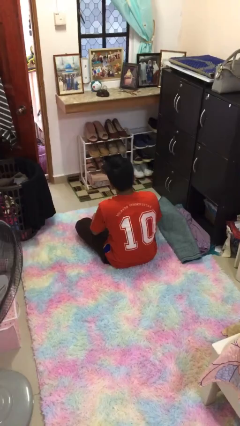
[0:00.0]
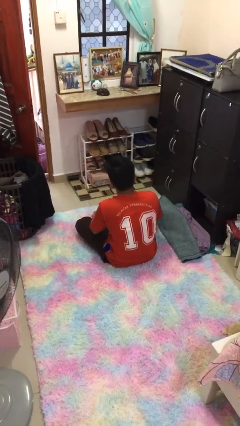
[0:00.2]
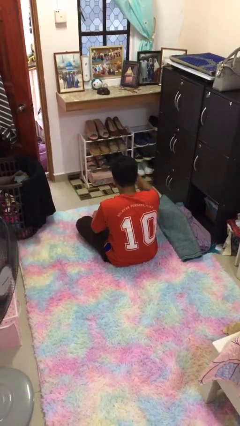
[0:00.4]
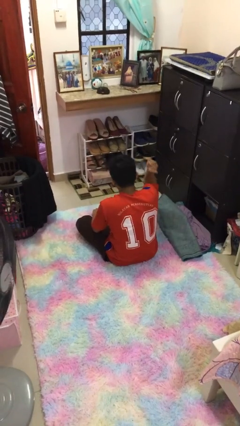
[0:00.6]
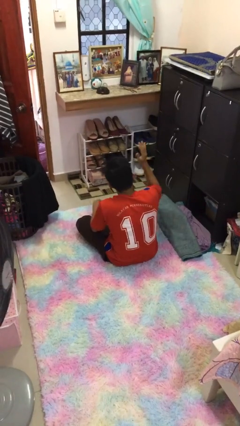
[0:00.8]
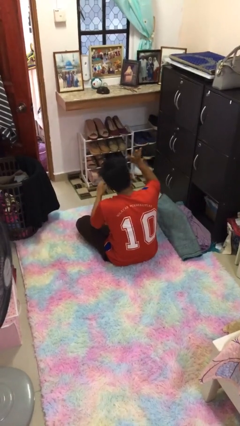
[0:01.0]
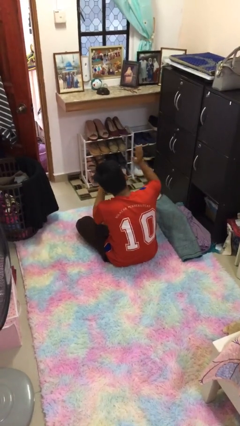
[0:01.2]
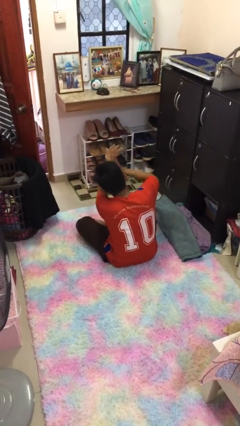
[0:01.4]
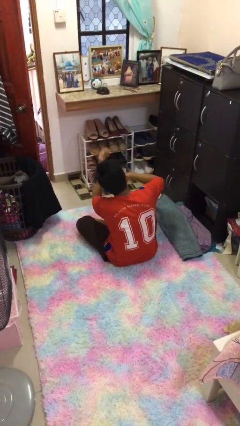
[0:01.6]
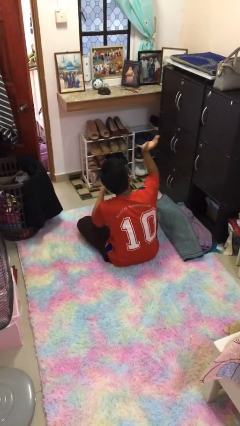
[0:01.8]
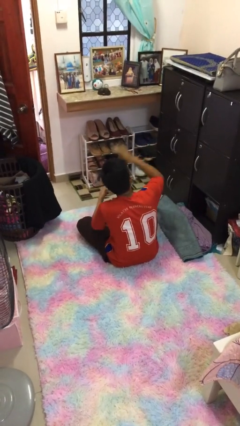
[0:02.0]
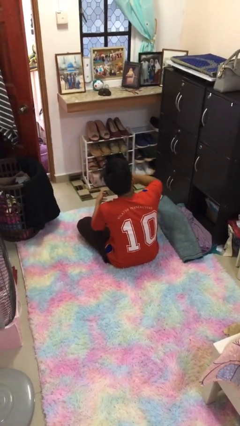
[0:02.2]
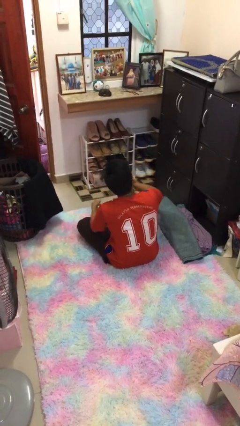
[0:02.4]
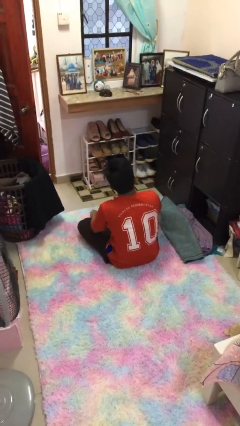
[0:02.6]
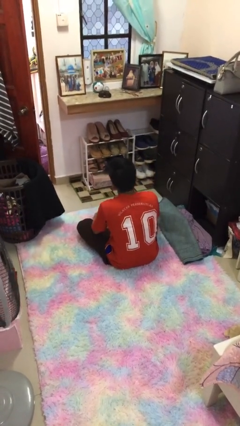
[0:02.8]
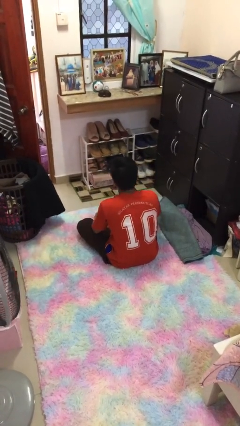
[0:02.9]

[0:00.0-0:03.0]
person swats bug

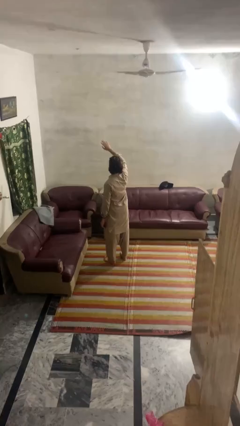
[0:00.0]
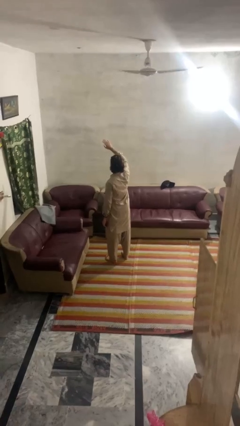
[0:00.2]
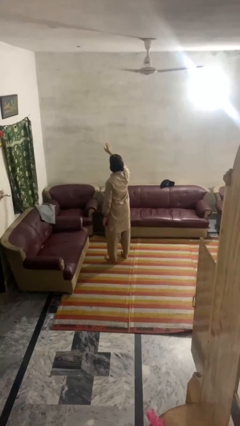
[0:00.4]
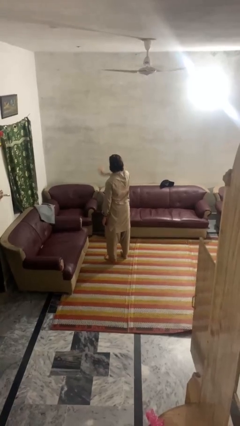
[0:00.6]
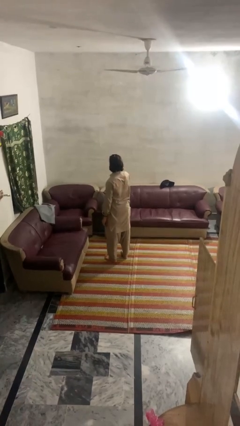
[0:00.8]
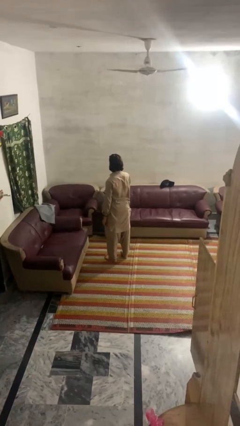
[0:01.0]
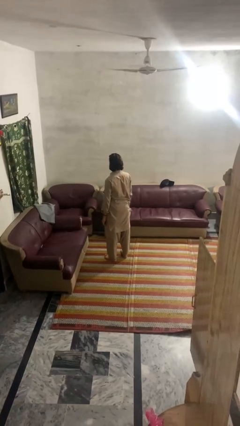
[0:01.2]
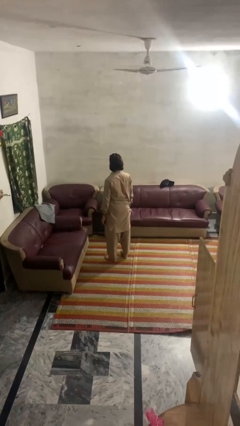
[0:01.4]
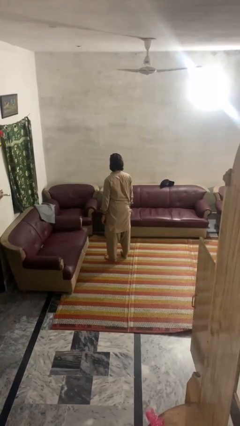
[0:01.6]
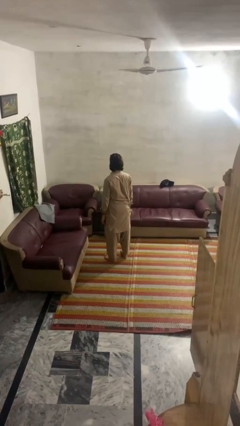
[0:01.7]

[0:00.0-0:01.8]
person gestures swipe down

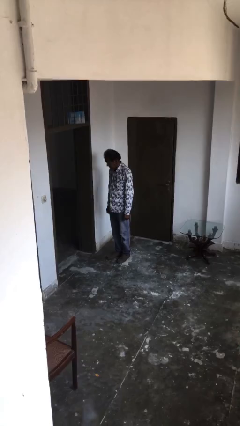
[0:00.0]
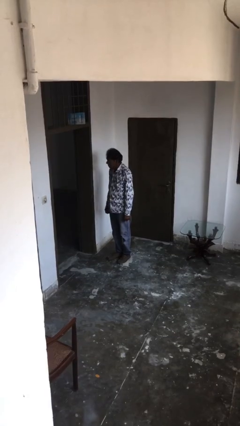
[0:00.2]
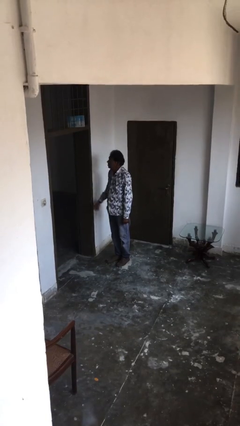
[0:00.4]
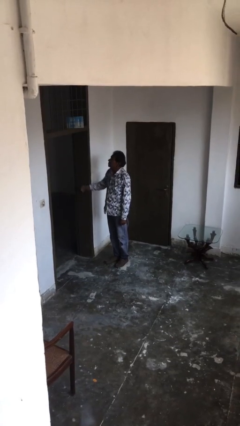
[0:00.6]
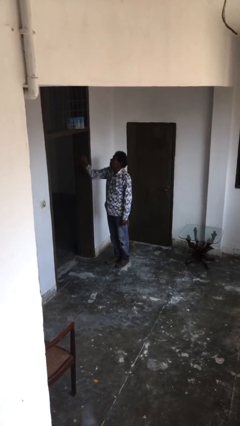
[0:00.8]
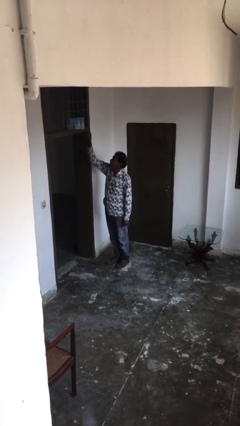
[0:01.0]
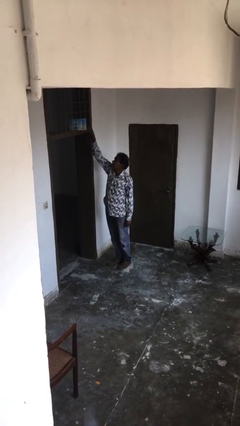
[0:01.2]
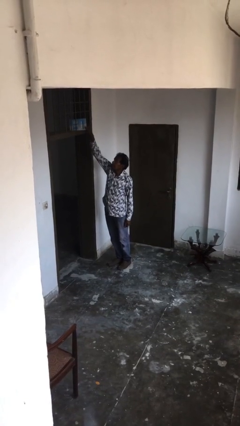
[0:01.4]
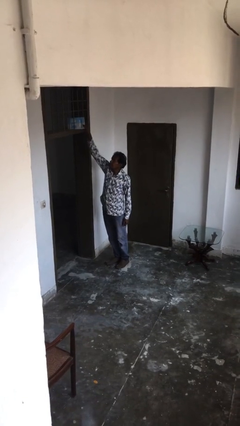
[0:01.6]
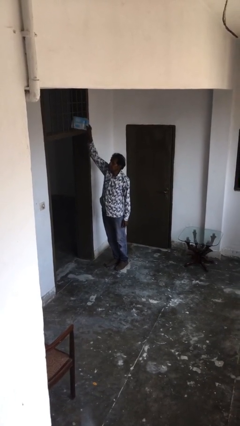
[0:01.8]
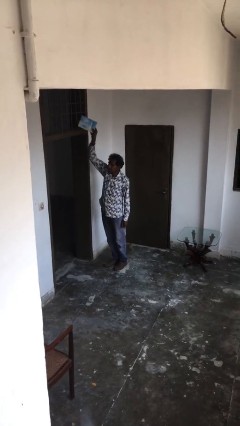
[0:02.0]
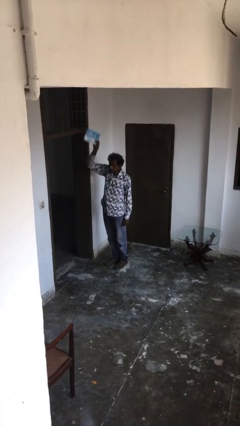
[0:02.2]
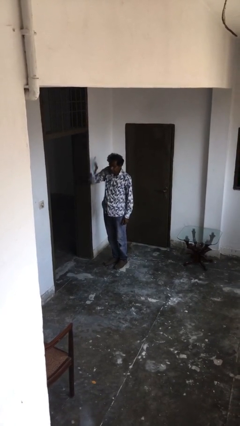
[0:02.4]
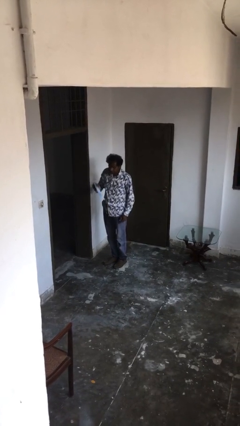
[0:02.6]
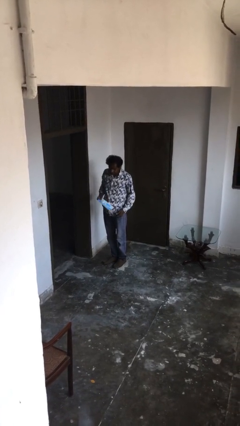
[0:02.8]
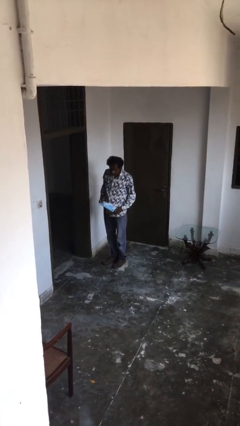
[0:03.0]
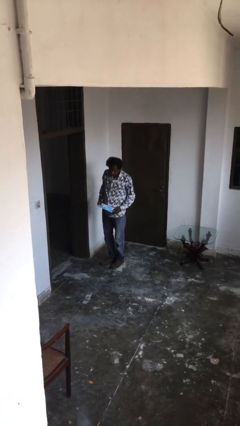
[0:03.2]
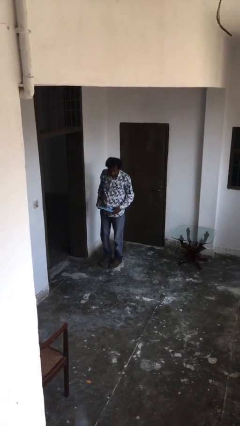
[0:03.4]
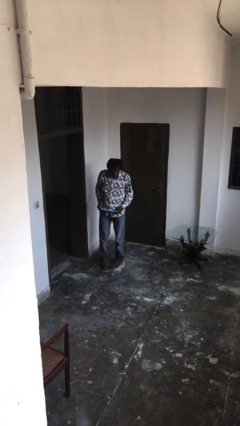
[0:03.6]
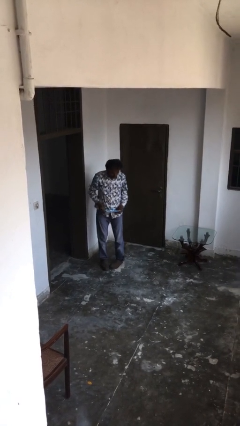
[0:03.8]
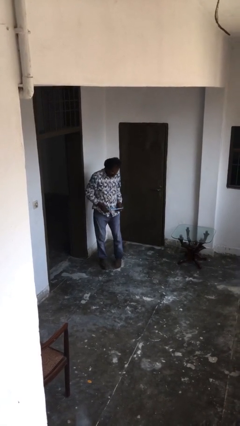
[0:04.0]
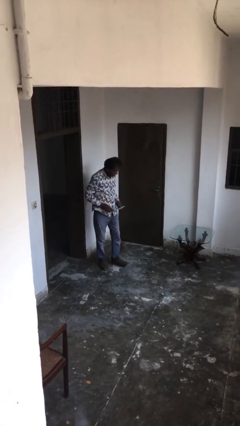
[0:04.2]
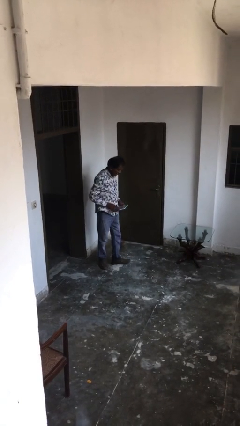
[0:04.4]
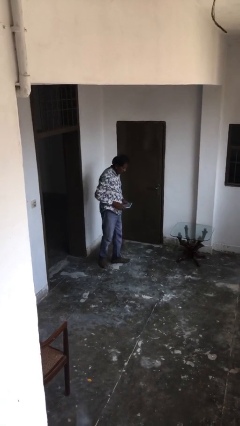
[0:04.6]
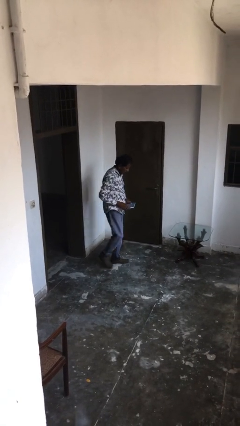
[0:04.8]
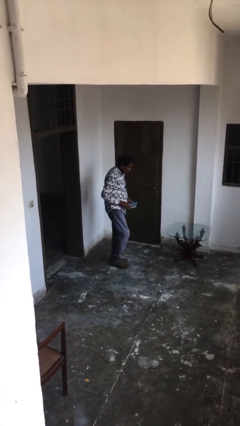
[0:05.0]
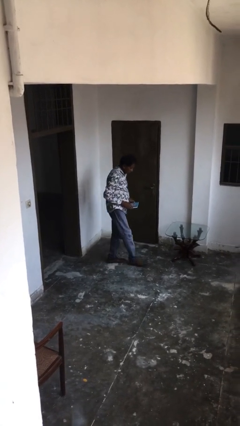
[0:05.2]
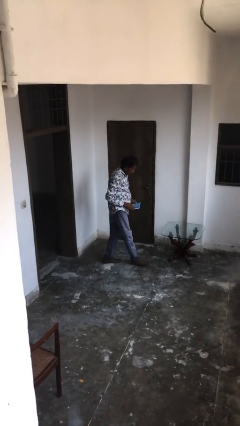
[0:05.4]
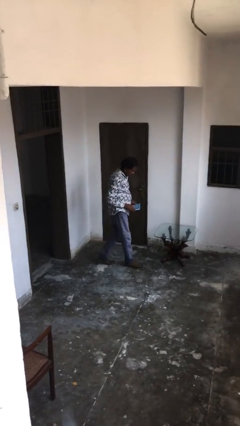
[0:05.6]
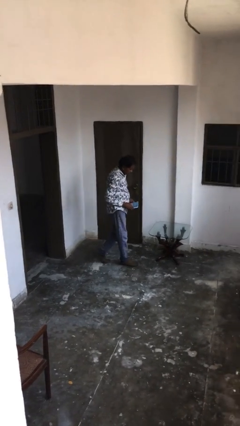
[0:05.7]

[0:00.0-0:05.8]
person picks up object from shelf

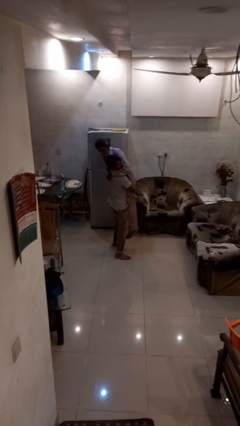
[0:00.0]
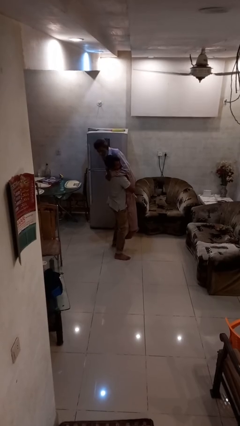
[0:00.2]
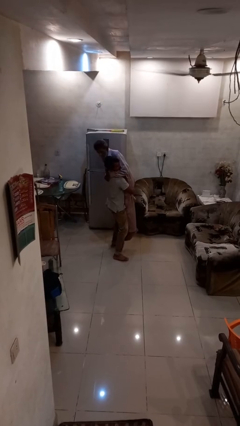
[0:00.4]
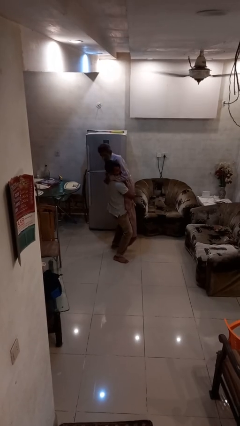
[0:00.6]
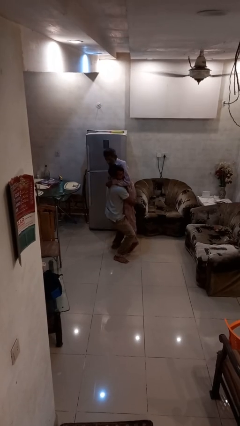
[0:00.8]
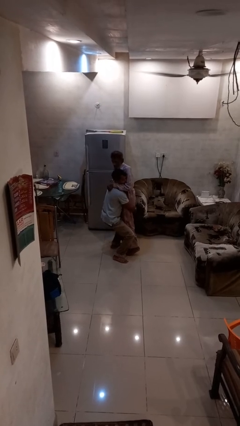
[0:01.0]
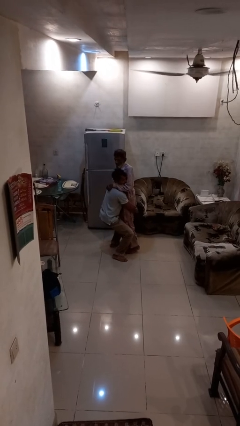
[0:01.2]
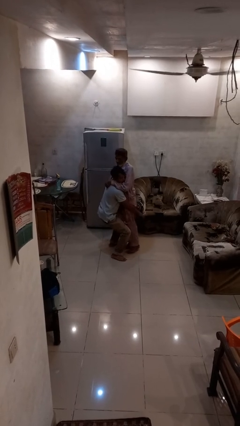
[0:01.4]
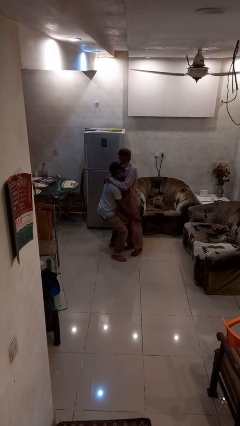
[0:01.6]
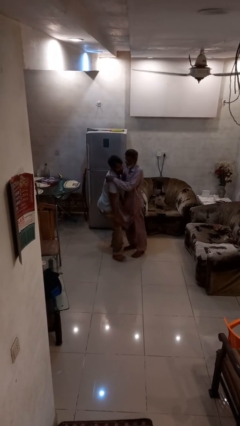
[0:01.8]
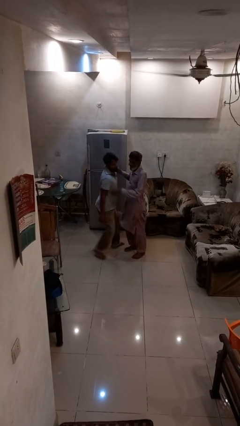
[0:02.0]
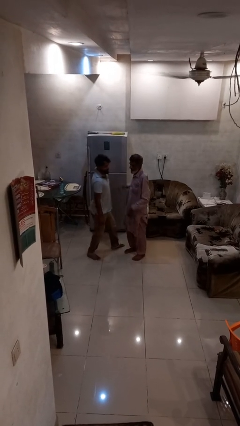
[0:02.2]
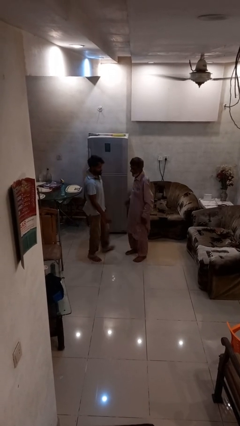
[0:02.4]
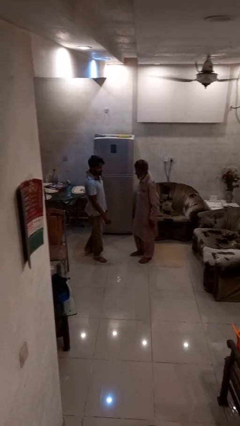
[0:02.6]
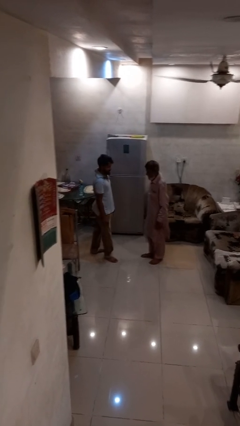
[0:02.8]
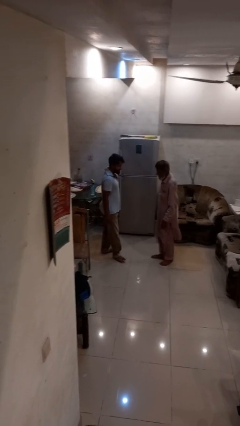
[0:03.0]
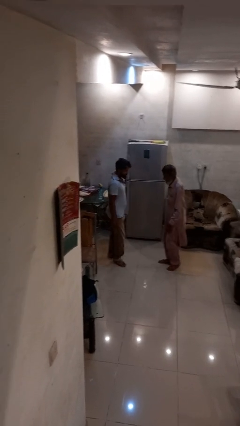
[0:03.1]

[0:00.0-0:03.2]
person puts down person

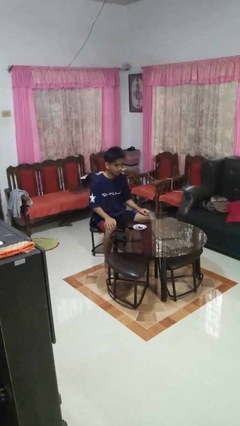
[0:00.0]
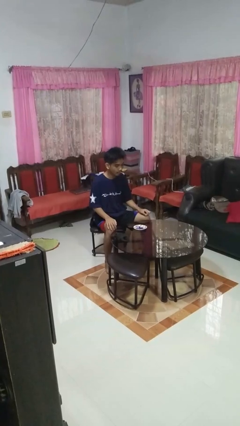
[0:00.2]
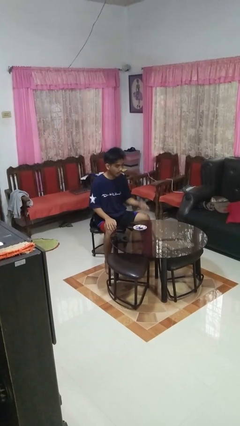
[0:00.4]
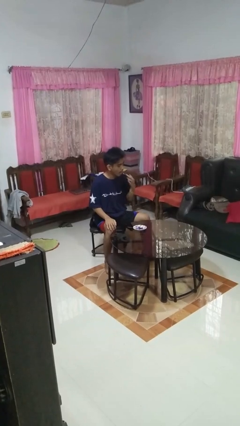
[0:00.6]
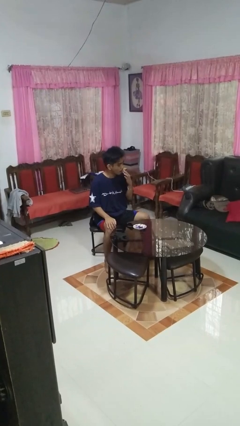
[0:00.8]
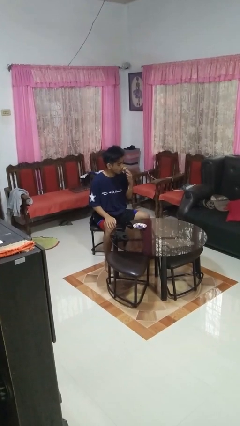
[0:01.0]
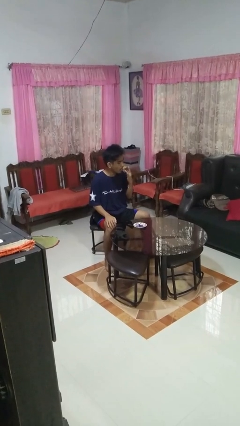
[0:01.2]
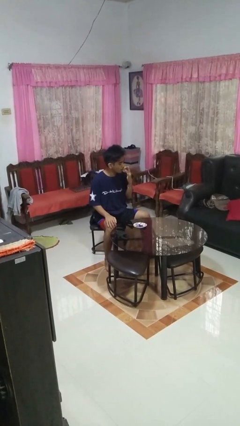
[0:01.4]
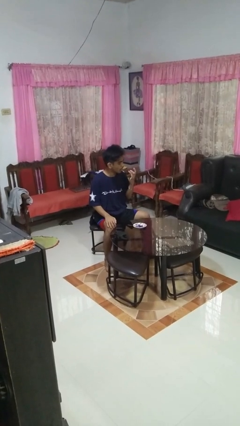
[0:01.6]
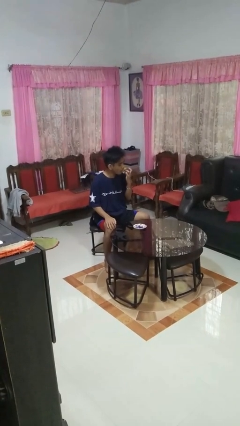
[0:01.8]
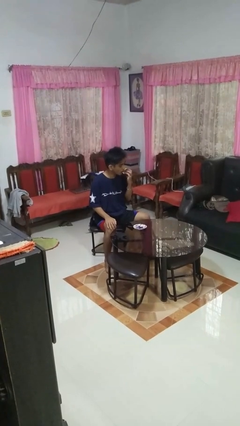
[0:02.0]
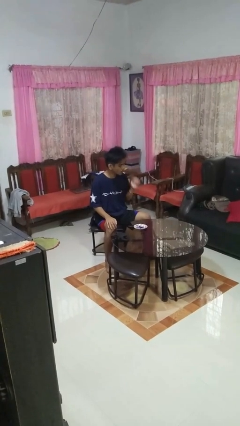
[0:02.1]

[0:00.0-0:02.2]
person licks fingers

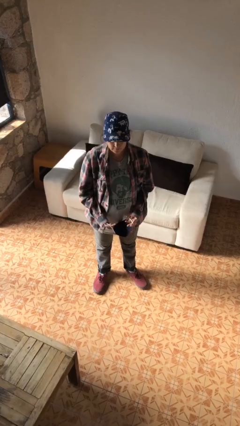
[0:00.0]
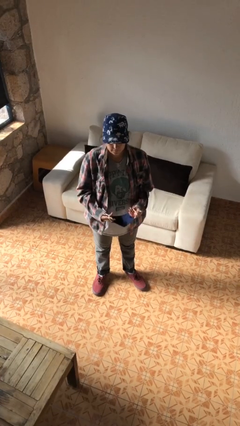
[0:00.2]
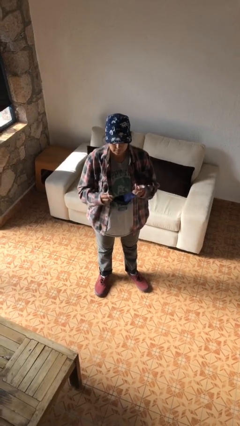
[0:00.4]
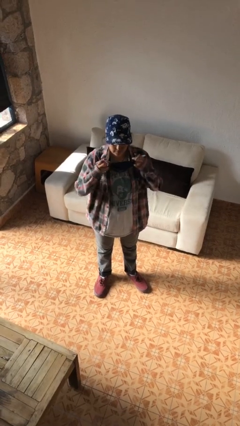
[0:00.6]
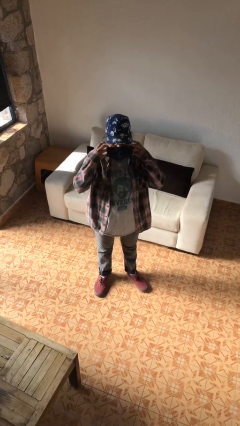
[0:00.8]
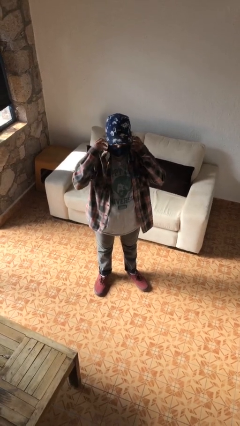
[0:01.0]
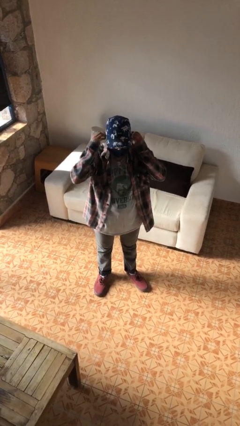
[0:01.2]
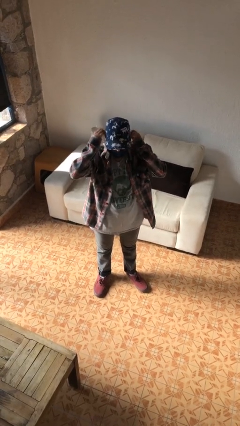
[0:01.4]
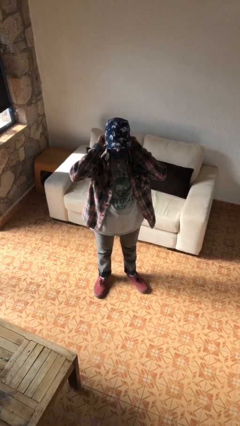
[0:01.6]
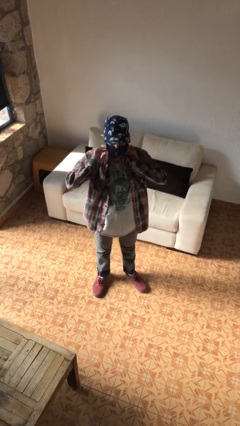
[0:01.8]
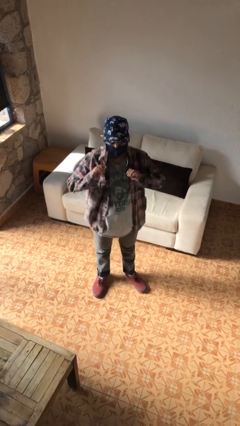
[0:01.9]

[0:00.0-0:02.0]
person puts on facemask
